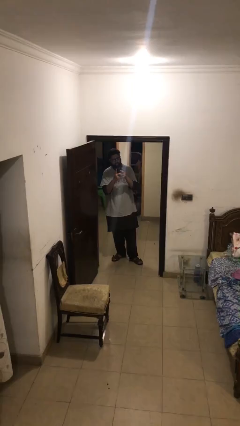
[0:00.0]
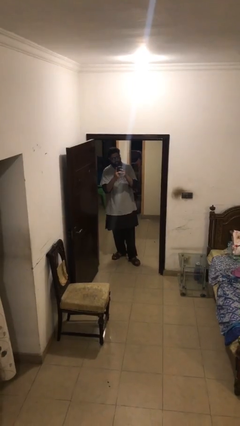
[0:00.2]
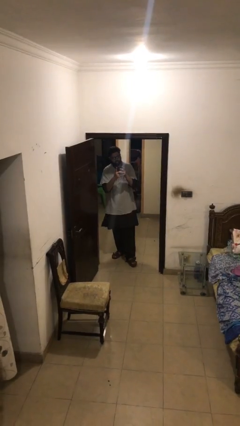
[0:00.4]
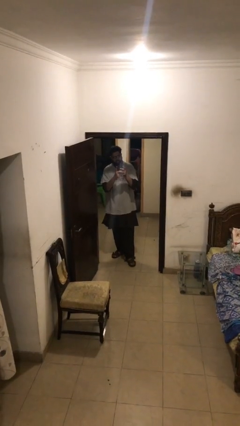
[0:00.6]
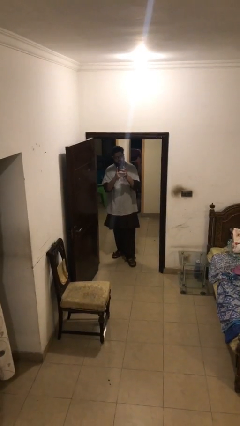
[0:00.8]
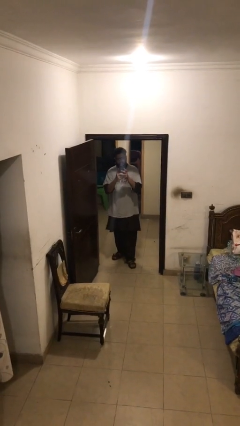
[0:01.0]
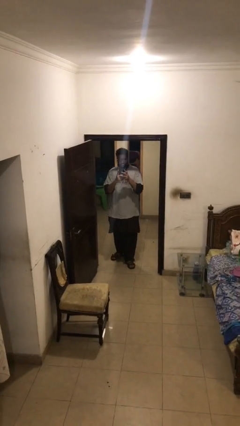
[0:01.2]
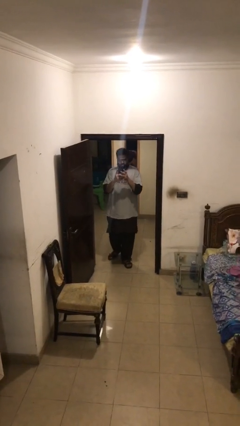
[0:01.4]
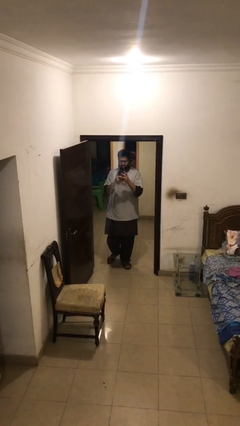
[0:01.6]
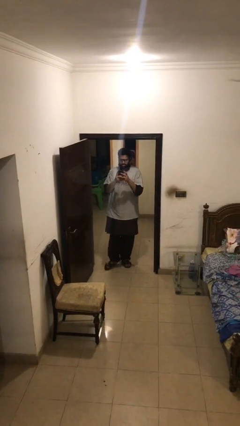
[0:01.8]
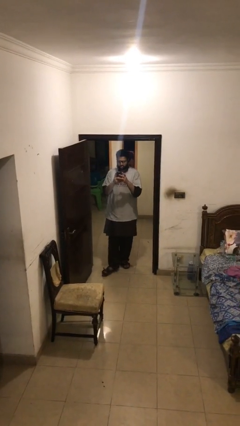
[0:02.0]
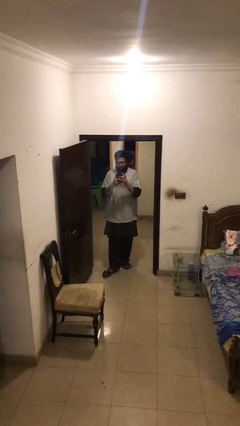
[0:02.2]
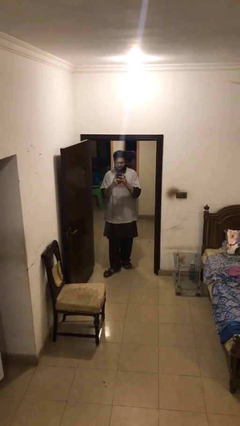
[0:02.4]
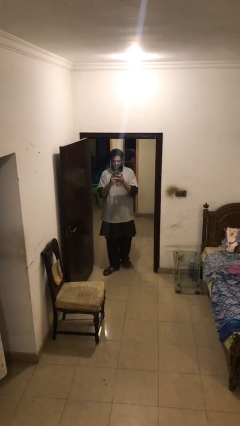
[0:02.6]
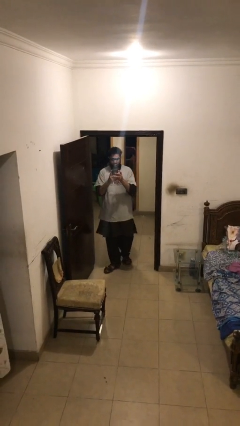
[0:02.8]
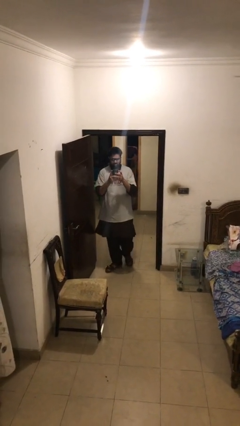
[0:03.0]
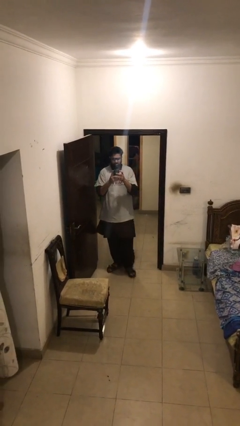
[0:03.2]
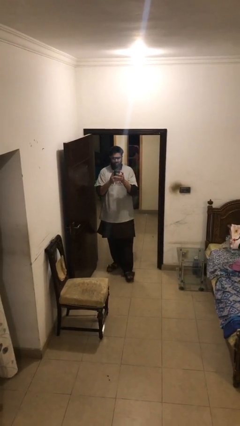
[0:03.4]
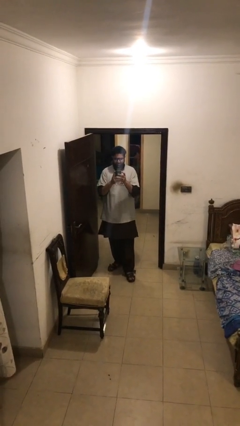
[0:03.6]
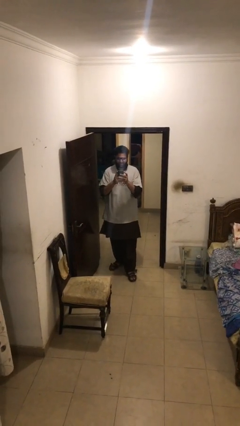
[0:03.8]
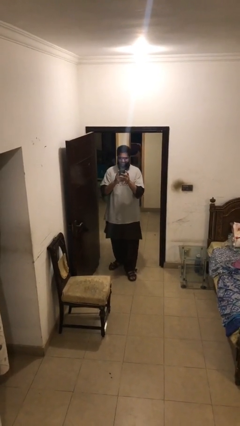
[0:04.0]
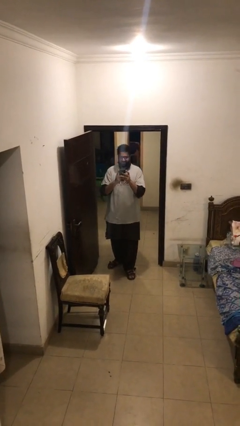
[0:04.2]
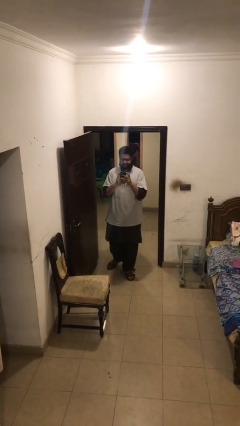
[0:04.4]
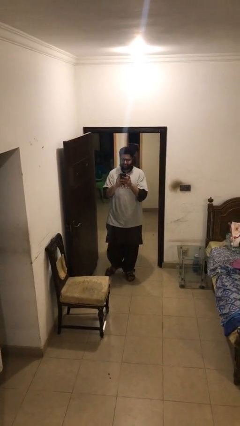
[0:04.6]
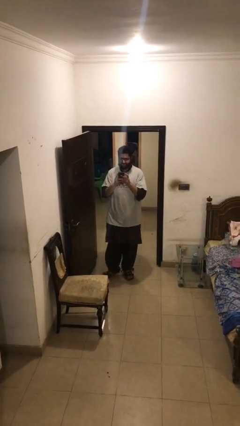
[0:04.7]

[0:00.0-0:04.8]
person texts on phone

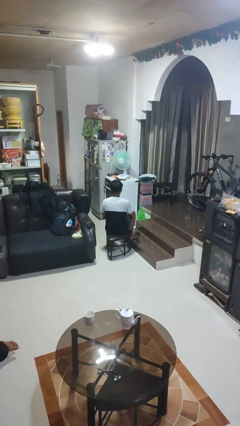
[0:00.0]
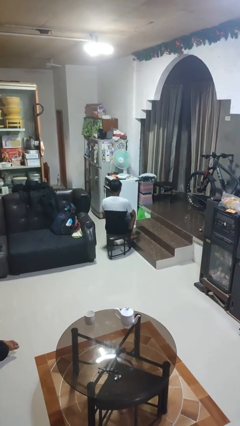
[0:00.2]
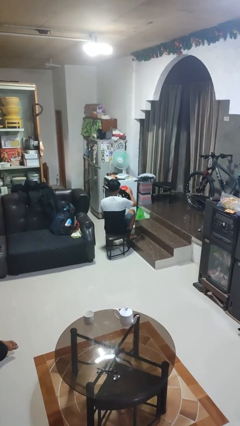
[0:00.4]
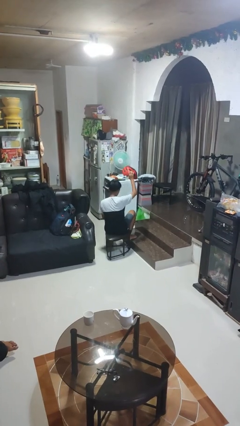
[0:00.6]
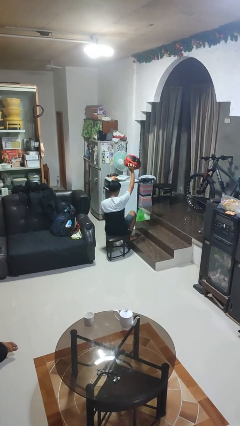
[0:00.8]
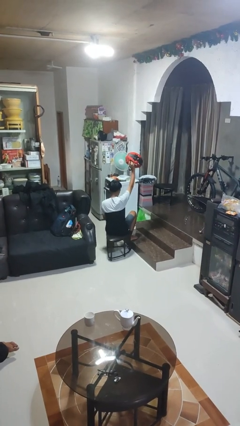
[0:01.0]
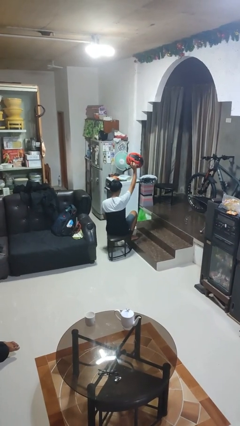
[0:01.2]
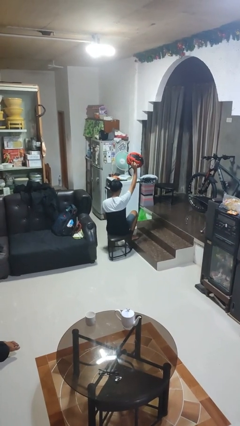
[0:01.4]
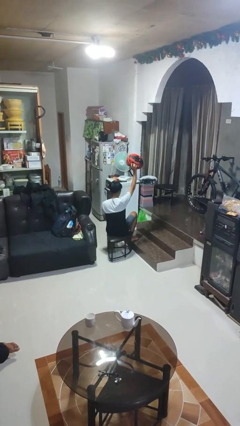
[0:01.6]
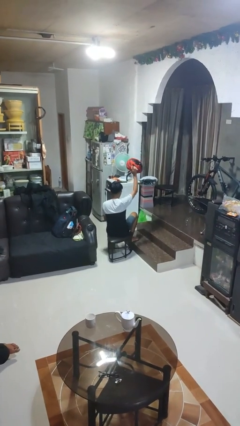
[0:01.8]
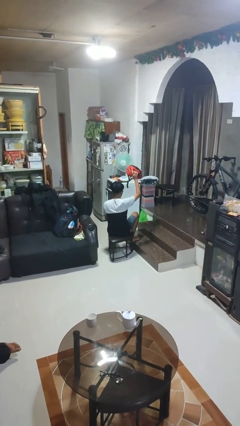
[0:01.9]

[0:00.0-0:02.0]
person holds object above head

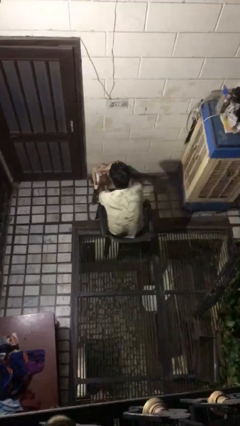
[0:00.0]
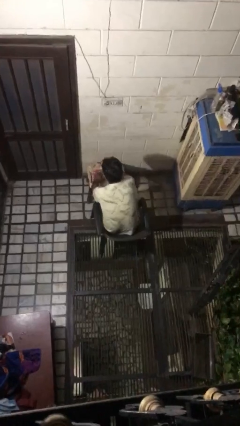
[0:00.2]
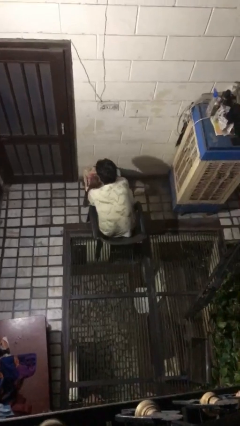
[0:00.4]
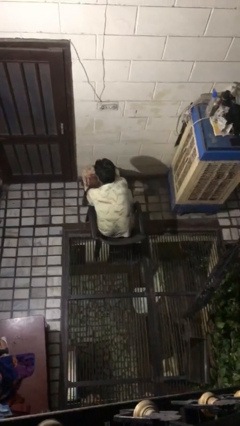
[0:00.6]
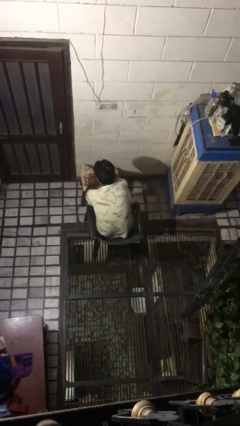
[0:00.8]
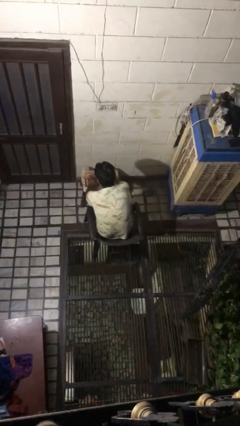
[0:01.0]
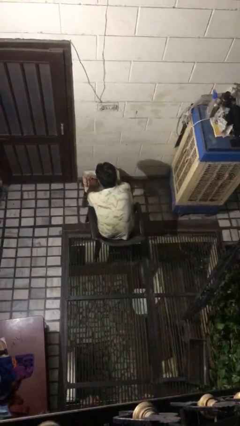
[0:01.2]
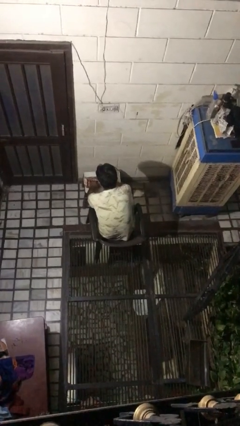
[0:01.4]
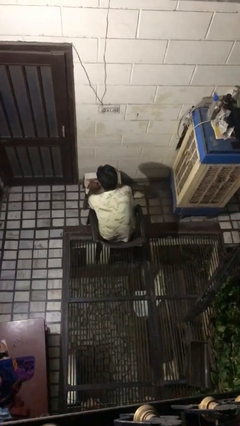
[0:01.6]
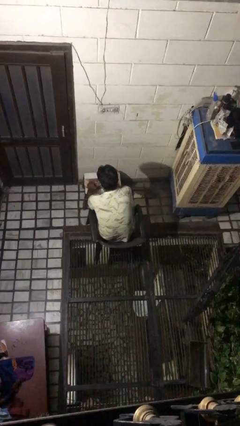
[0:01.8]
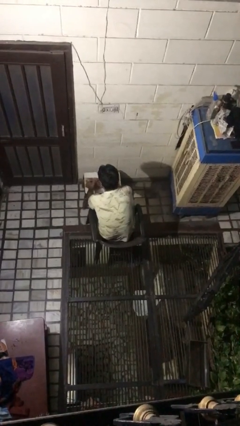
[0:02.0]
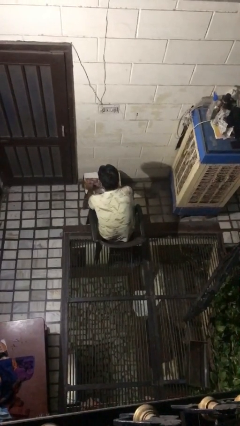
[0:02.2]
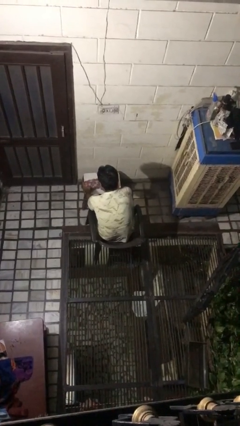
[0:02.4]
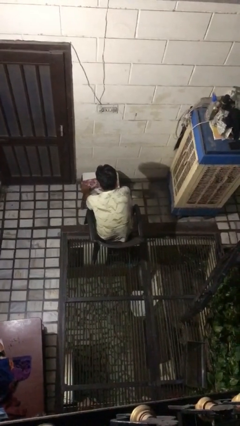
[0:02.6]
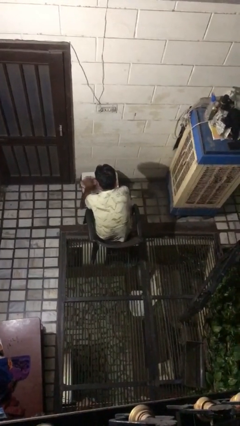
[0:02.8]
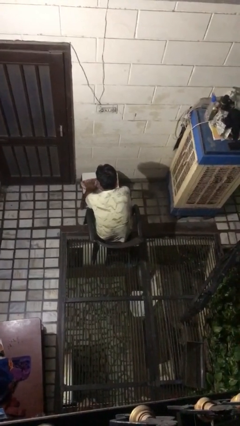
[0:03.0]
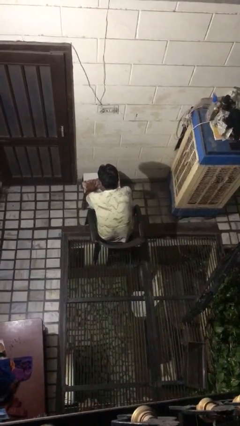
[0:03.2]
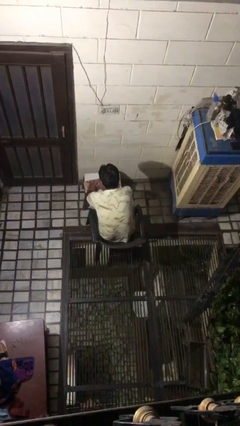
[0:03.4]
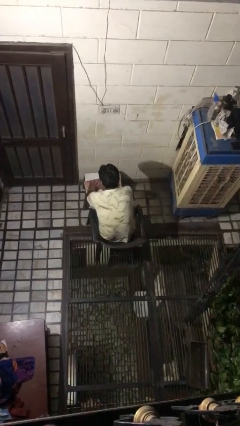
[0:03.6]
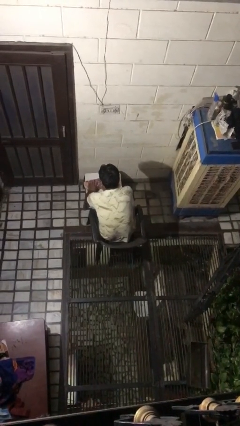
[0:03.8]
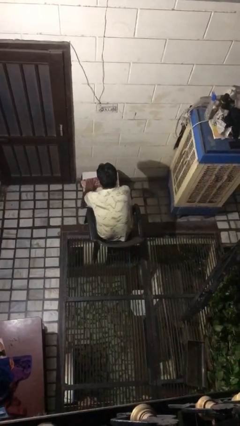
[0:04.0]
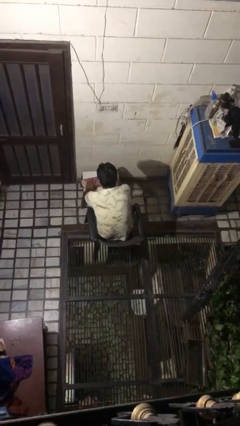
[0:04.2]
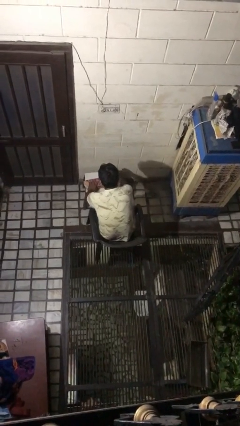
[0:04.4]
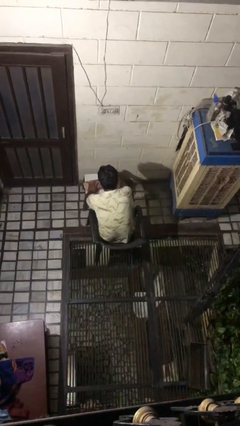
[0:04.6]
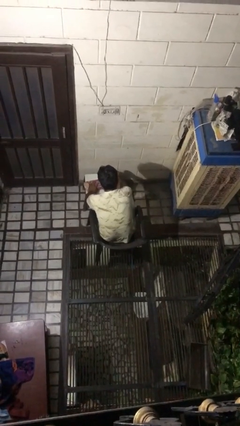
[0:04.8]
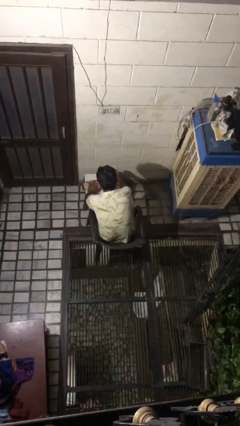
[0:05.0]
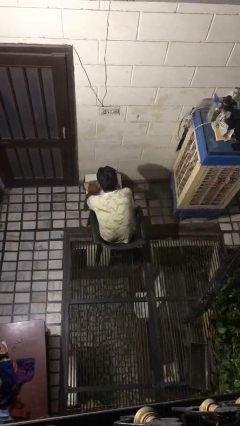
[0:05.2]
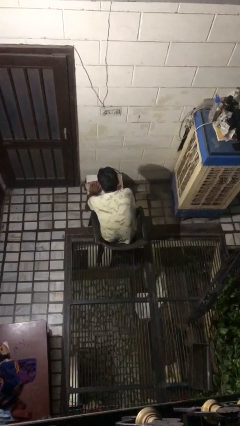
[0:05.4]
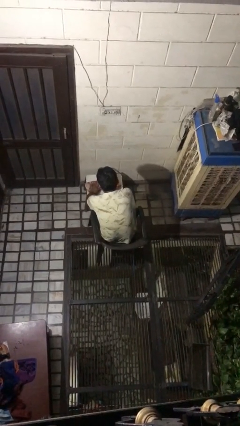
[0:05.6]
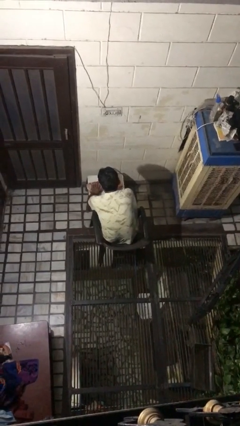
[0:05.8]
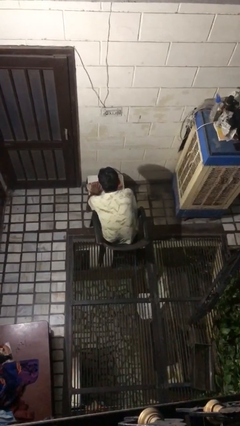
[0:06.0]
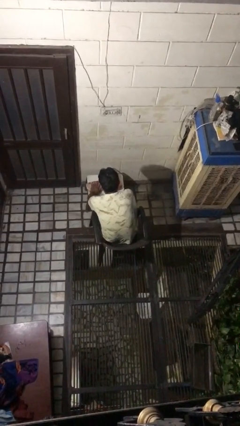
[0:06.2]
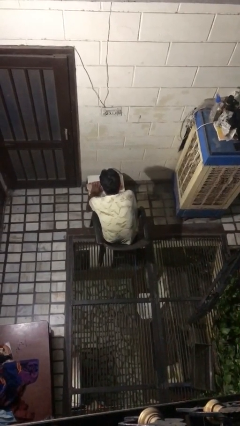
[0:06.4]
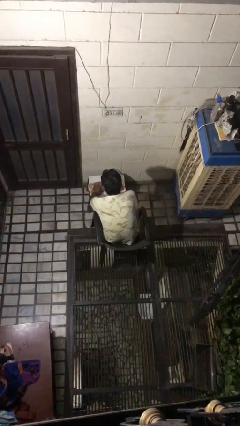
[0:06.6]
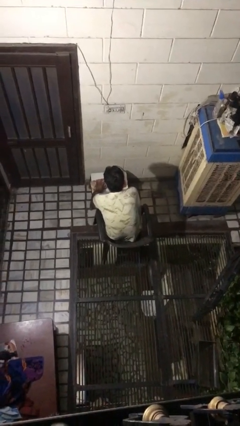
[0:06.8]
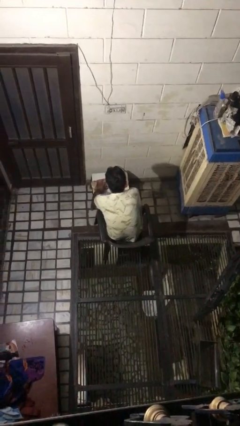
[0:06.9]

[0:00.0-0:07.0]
person wraps box

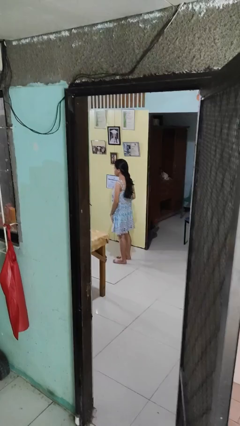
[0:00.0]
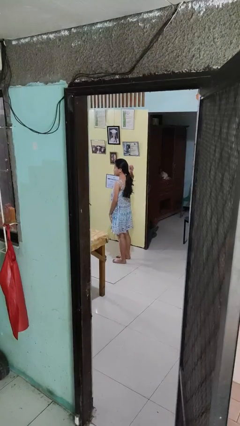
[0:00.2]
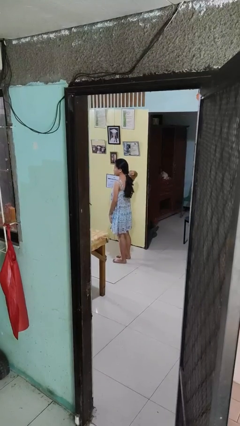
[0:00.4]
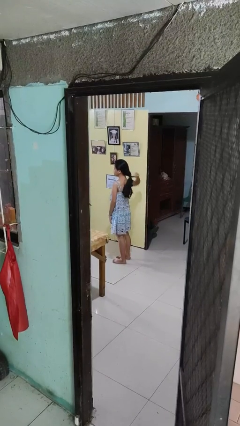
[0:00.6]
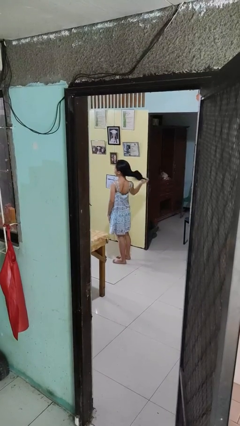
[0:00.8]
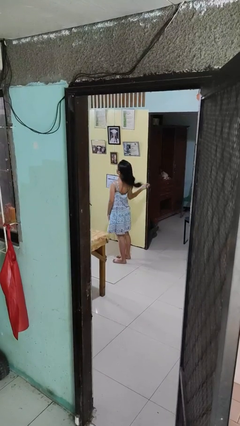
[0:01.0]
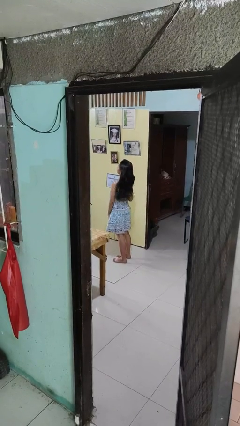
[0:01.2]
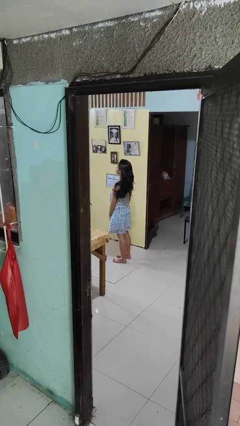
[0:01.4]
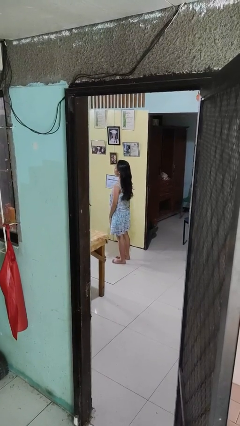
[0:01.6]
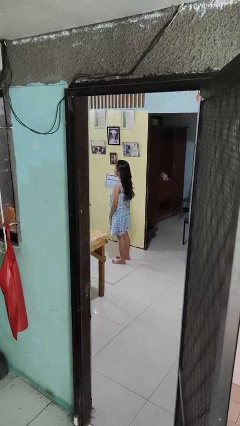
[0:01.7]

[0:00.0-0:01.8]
person takes off hairtie

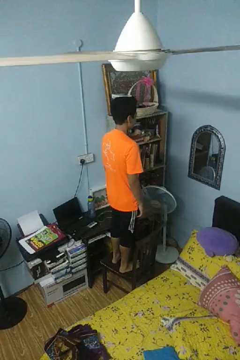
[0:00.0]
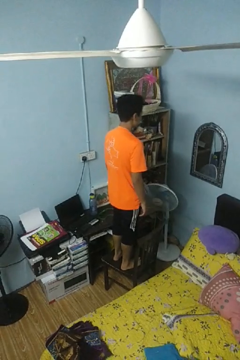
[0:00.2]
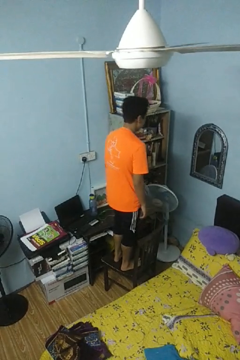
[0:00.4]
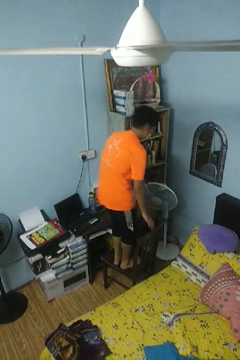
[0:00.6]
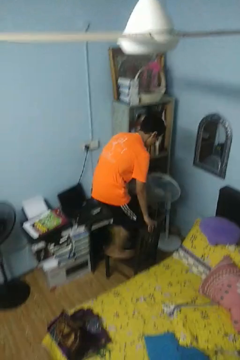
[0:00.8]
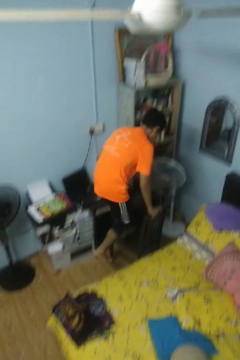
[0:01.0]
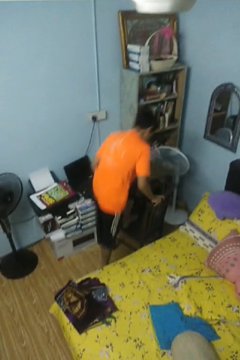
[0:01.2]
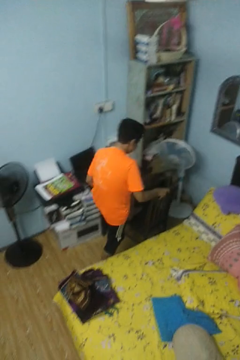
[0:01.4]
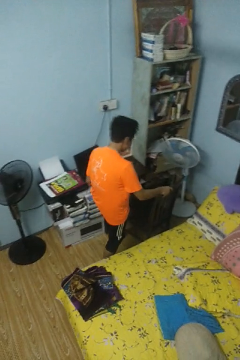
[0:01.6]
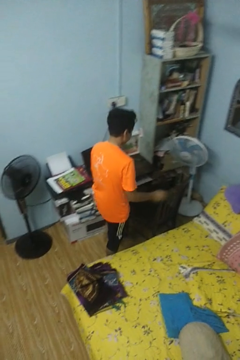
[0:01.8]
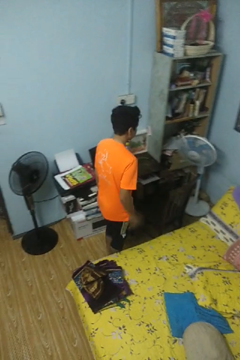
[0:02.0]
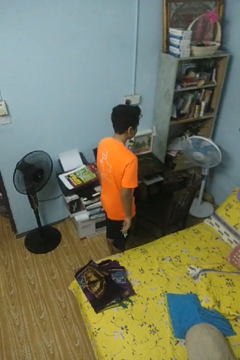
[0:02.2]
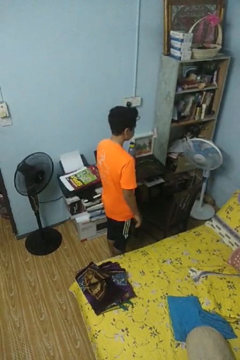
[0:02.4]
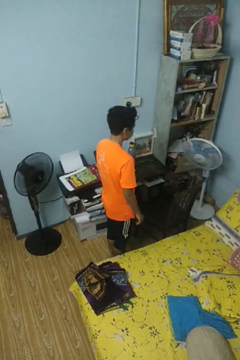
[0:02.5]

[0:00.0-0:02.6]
person climbs off chair

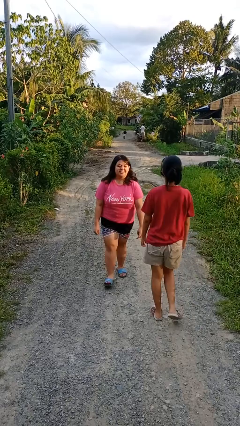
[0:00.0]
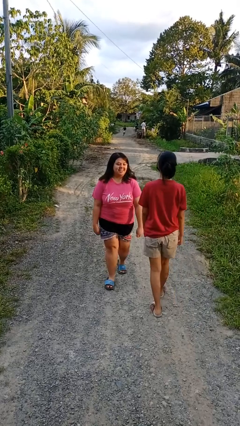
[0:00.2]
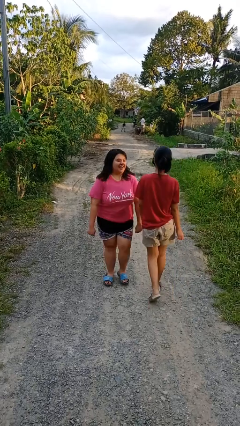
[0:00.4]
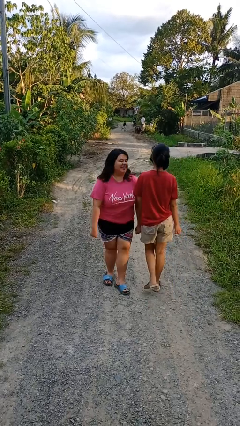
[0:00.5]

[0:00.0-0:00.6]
person bumps into person
